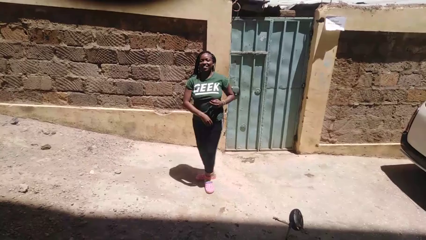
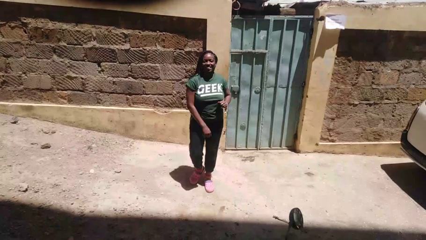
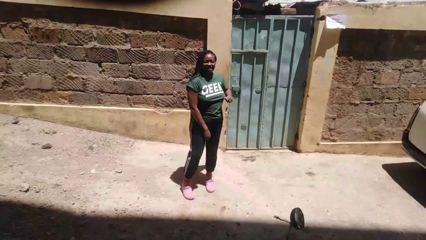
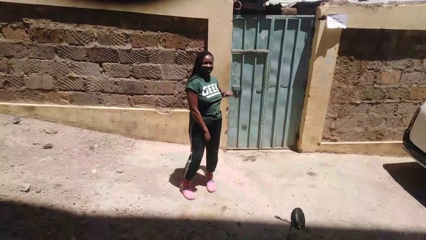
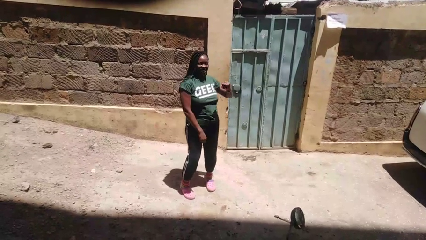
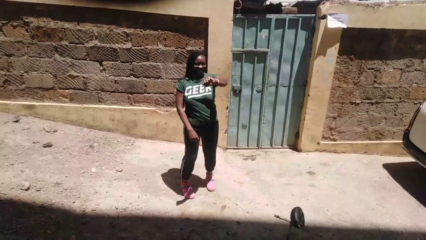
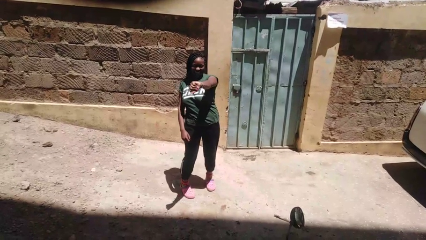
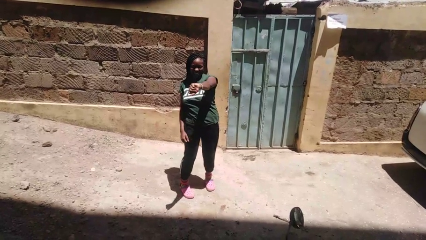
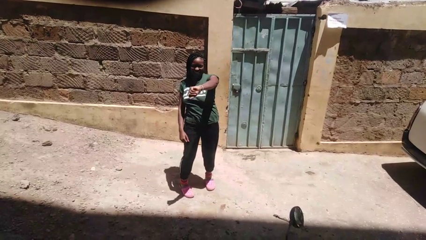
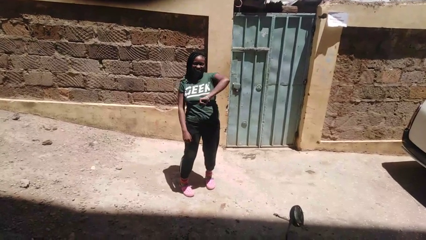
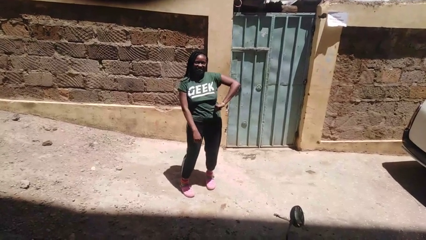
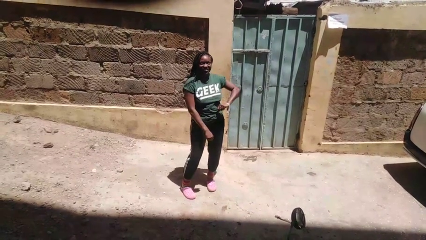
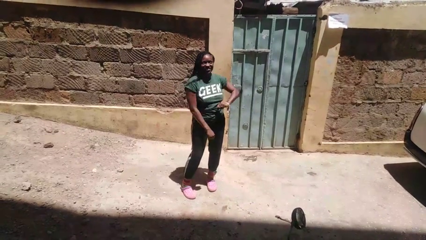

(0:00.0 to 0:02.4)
person punches

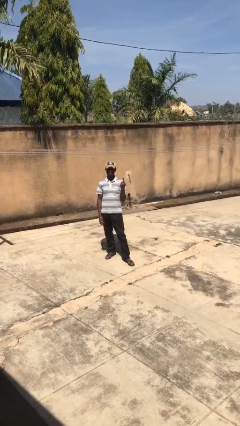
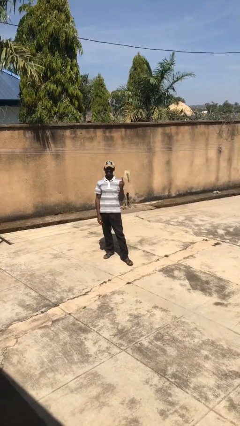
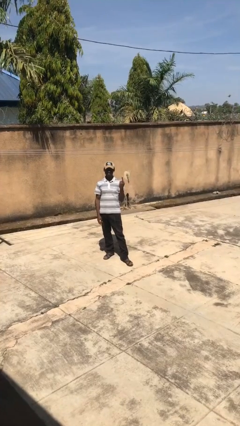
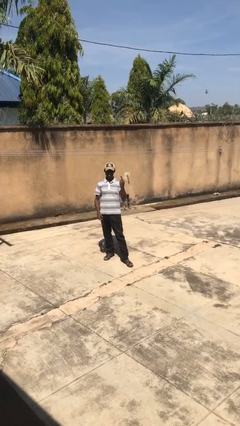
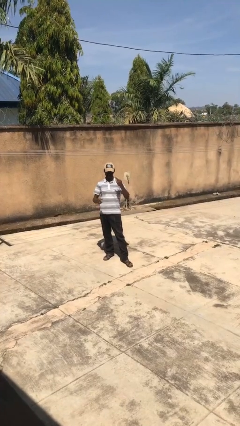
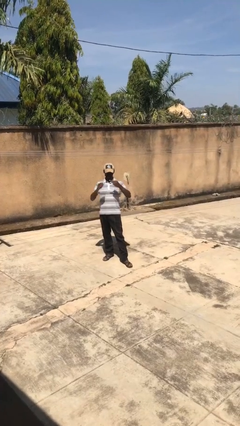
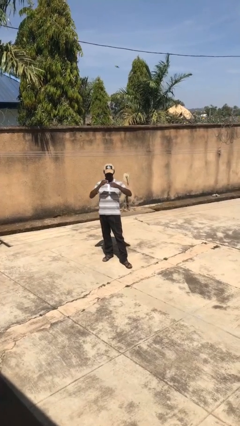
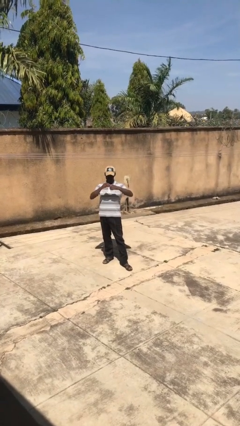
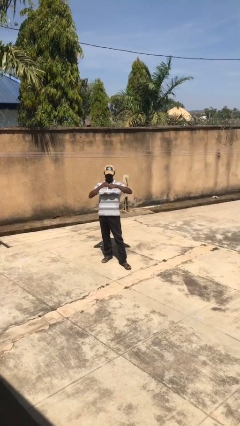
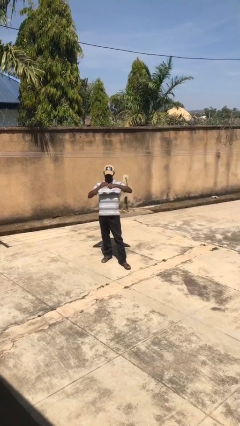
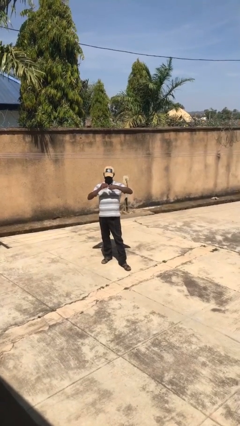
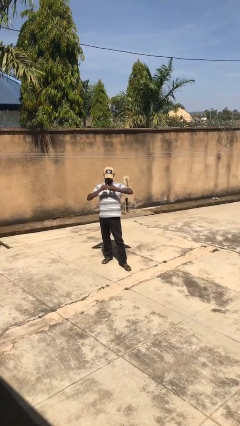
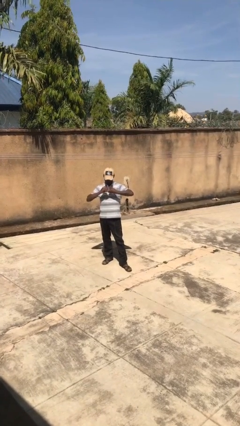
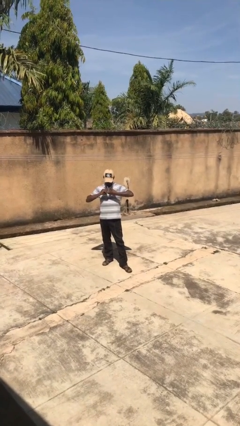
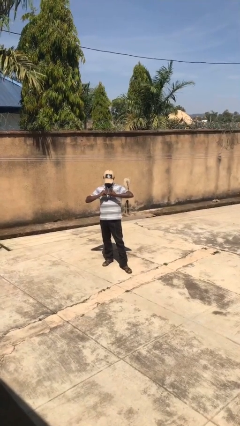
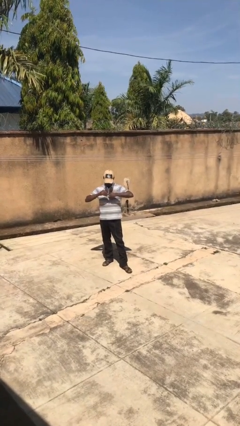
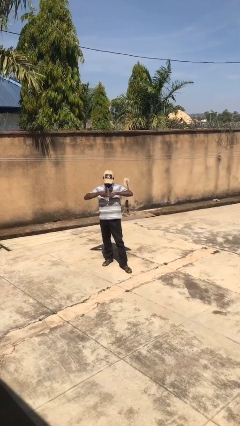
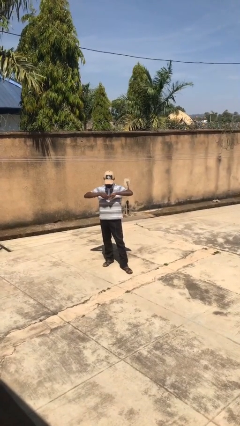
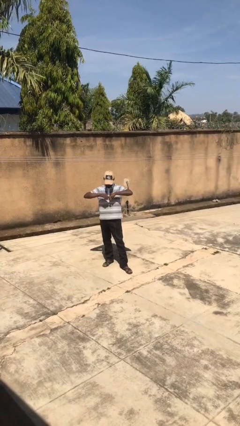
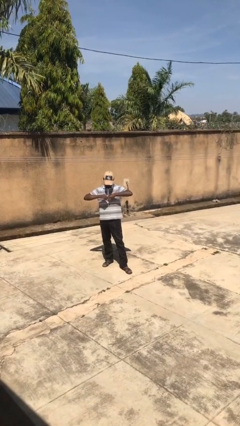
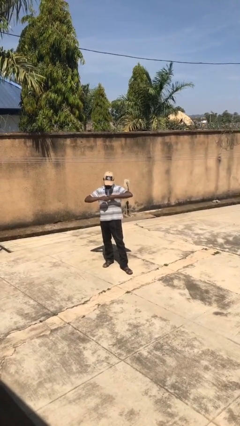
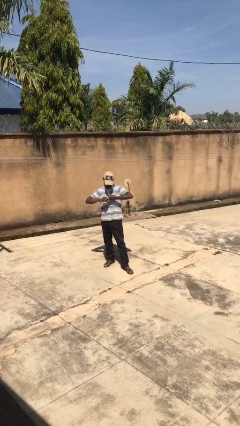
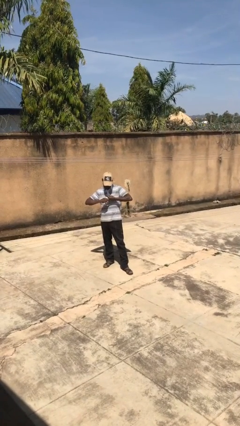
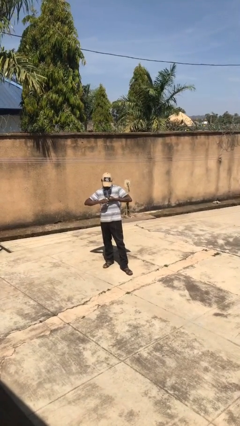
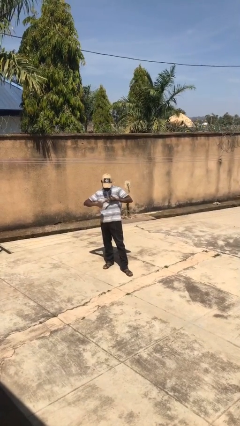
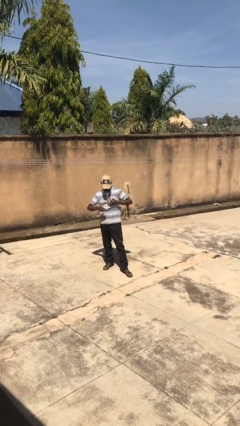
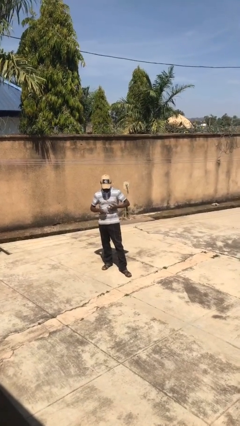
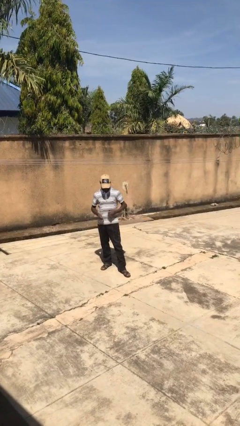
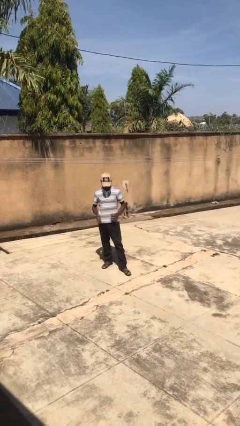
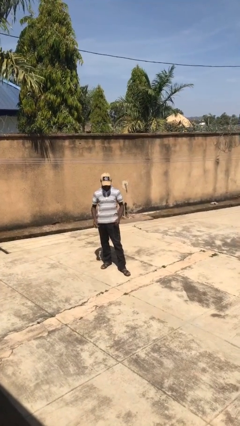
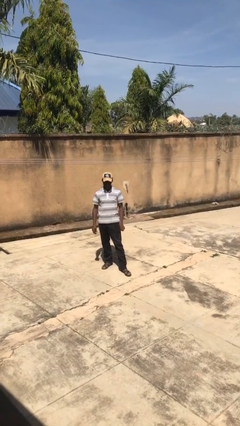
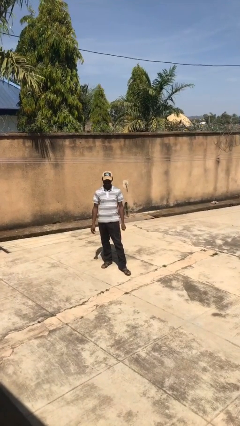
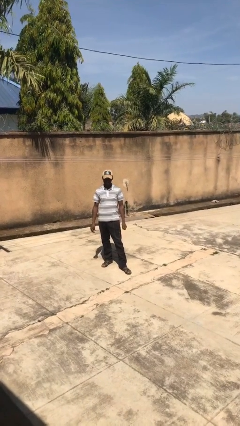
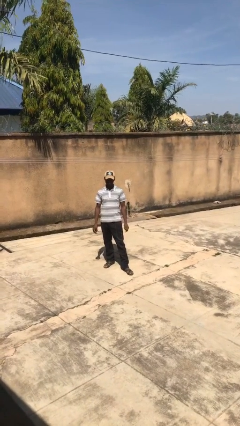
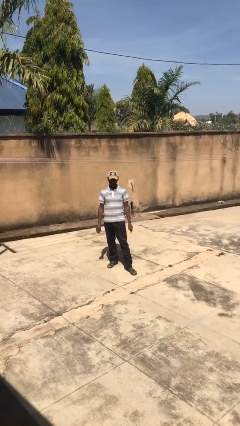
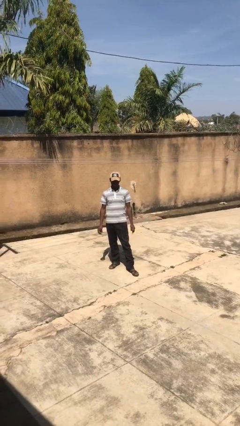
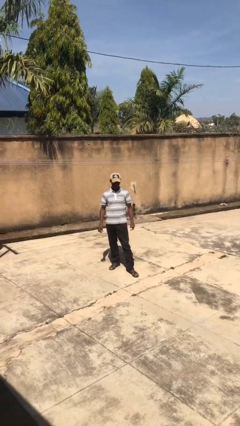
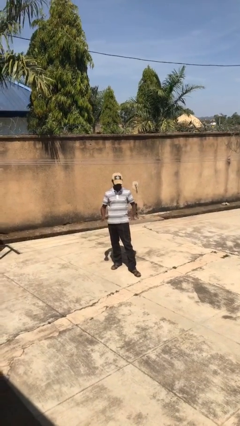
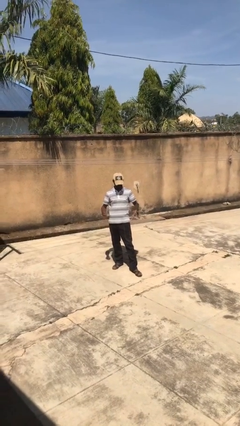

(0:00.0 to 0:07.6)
person takes off ring

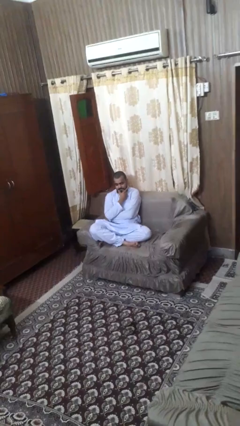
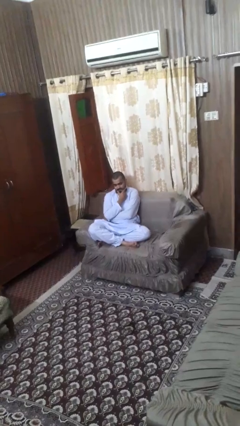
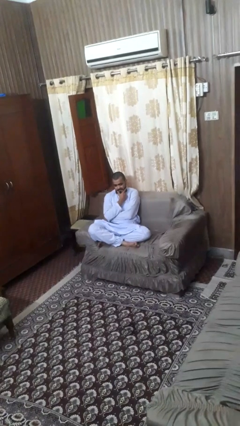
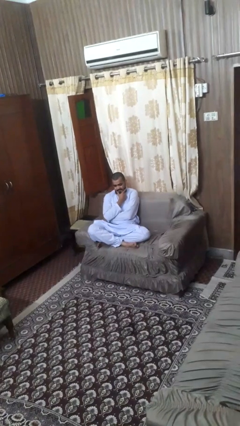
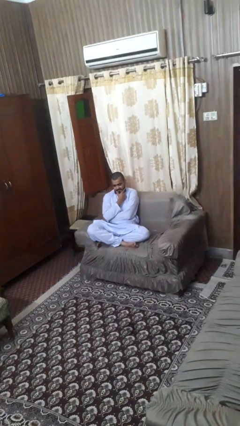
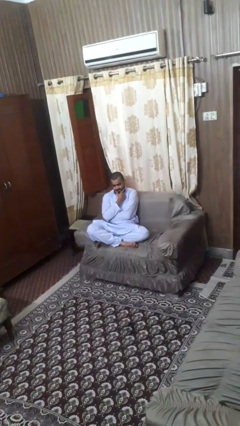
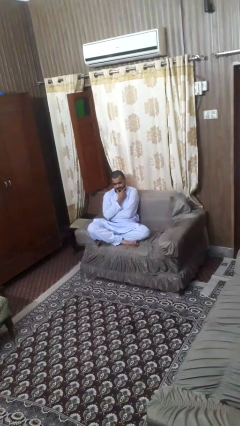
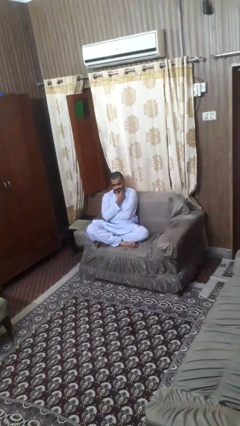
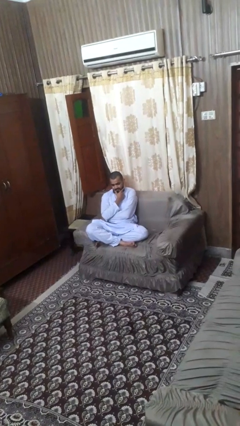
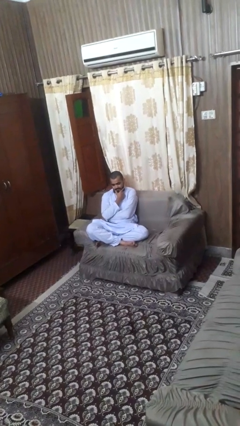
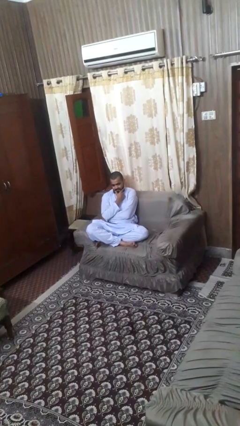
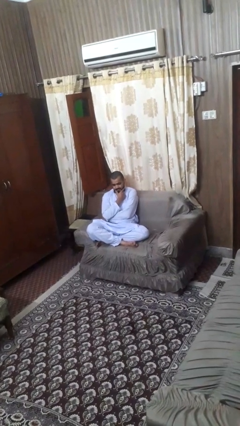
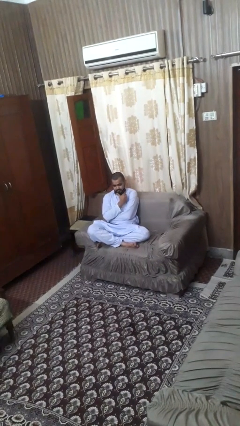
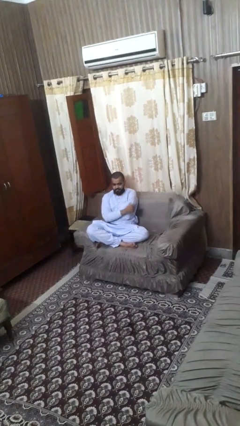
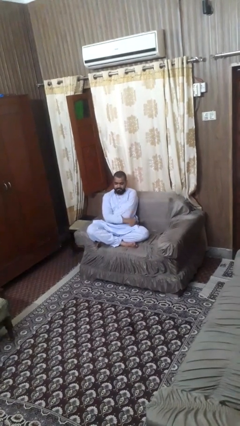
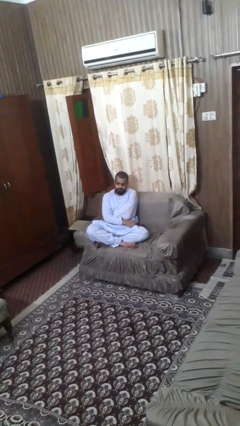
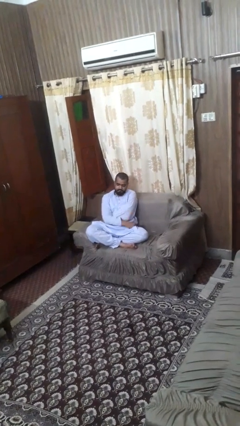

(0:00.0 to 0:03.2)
person strokes chin

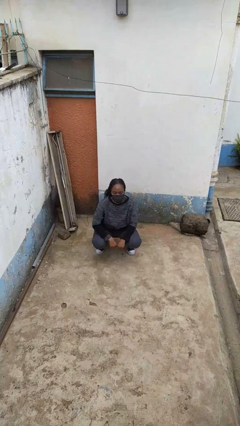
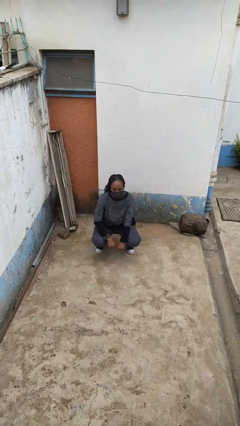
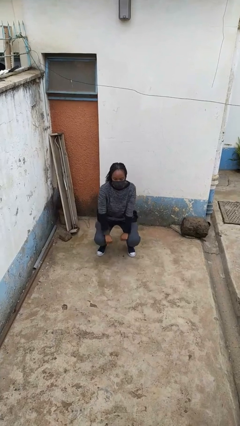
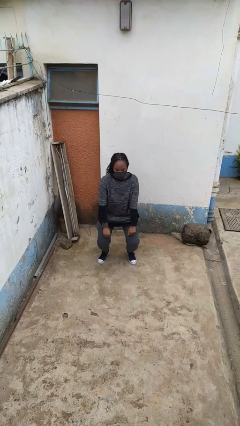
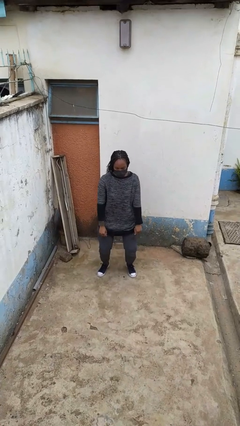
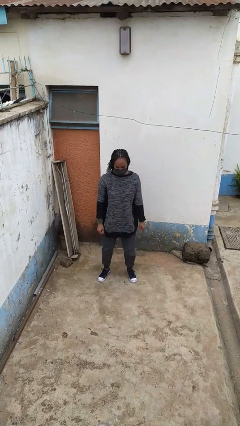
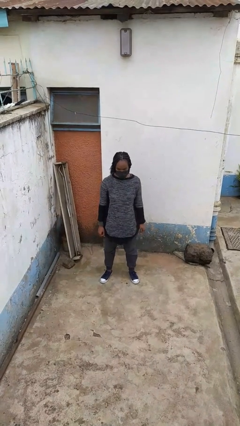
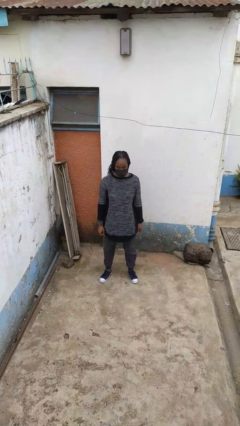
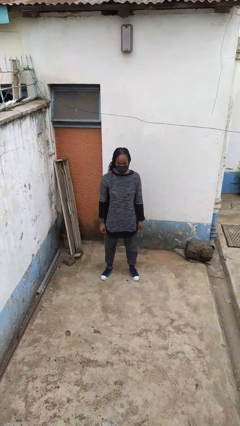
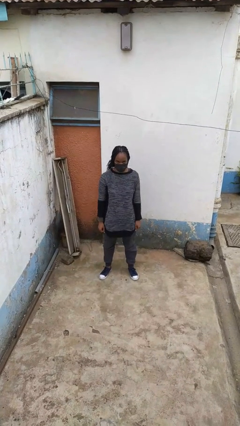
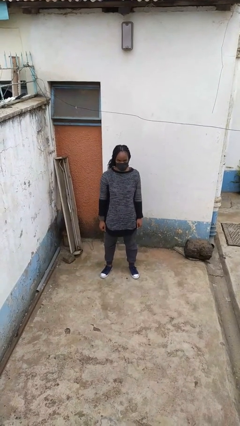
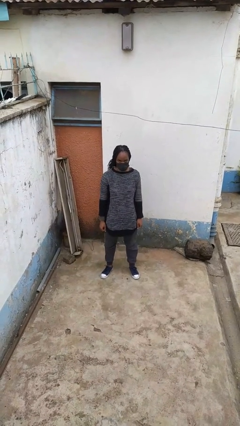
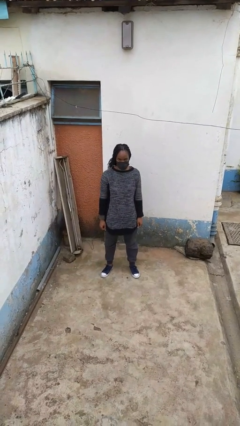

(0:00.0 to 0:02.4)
person stands up

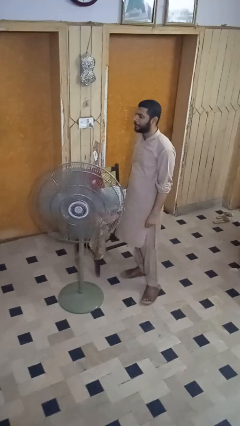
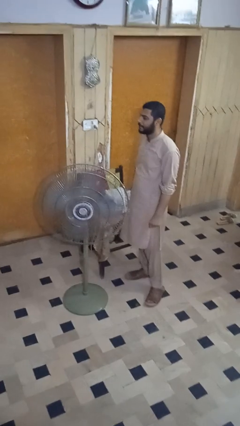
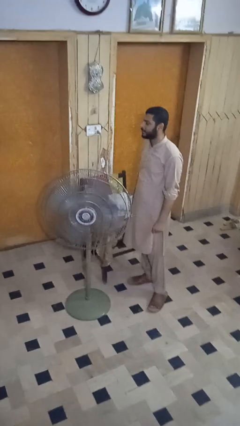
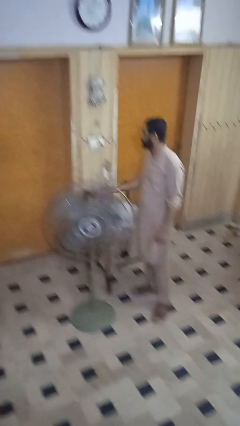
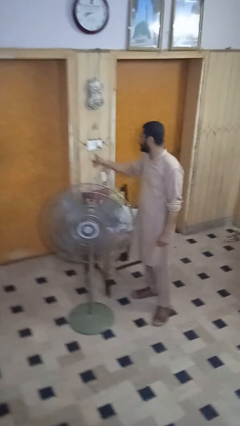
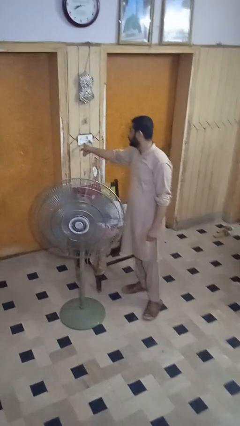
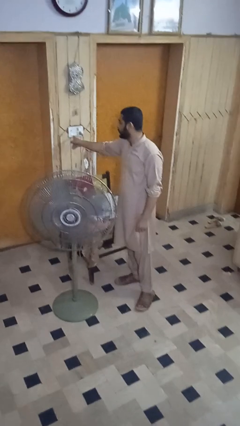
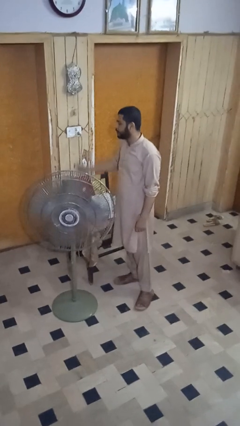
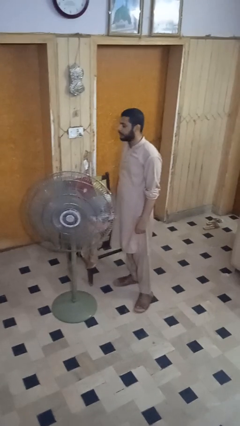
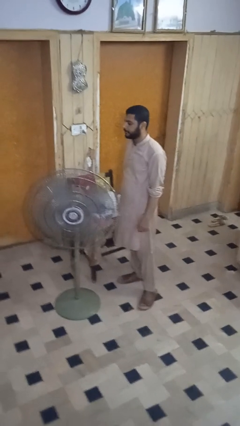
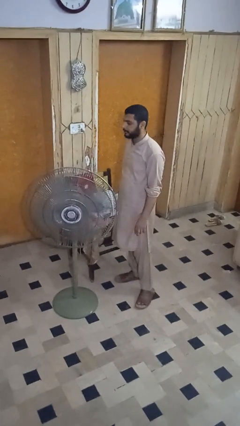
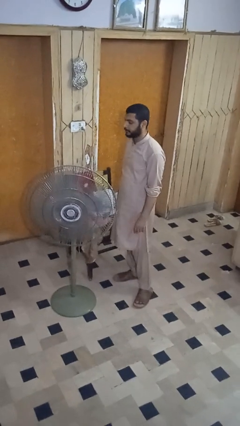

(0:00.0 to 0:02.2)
person turns on fan
